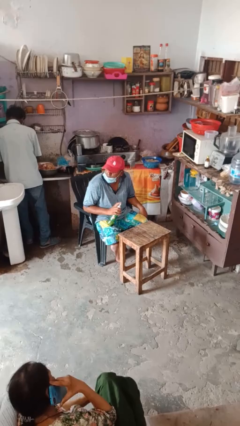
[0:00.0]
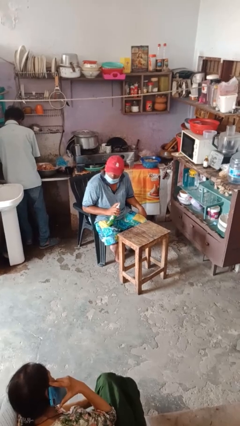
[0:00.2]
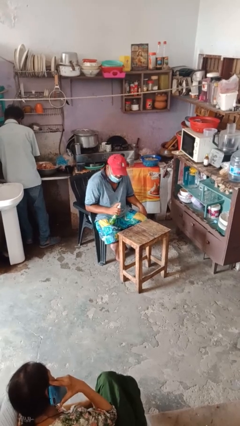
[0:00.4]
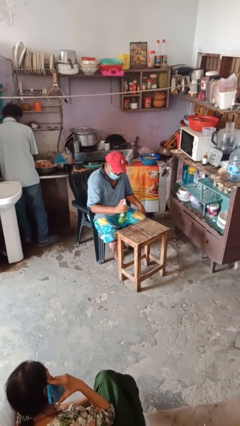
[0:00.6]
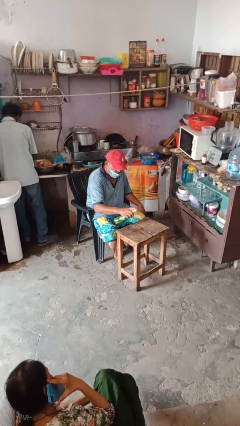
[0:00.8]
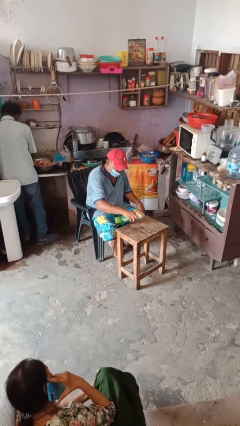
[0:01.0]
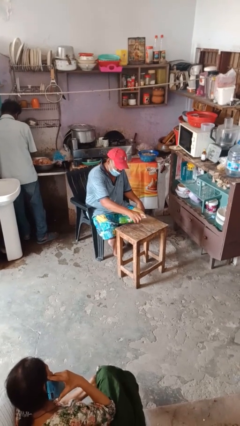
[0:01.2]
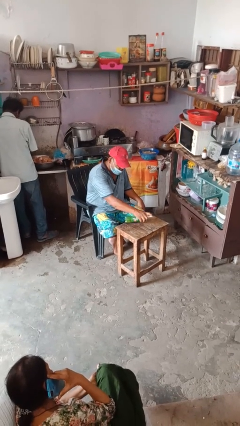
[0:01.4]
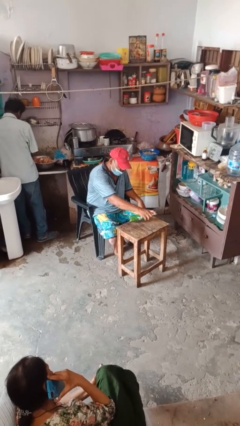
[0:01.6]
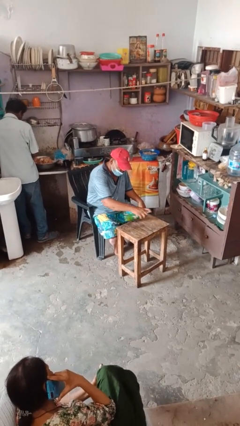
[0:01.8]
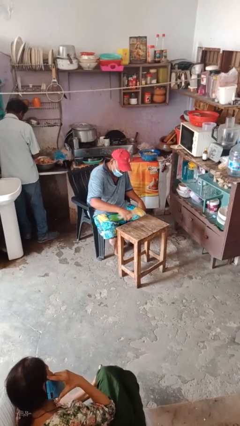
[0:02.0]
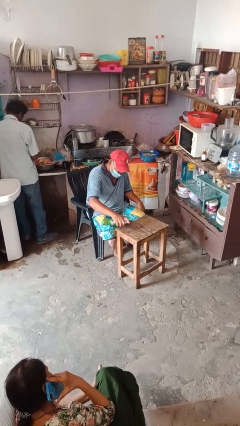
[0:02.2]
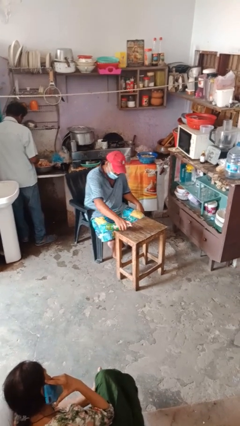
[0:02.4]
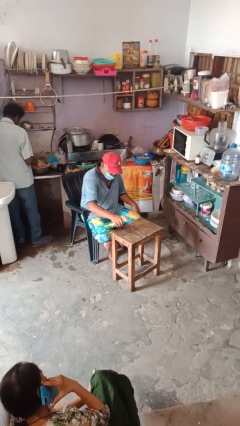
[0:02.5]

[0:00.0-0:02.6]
person sprays from bottle

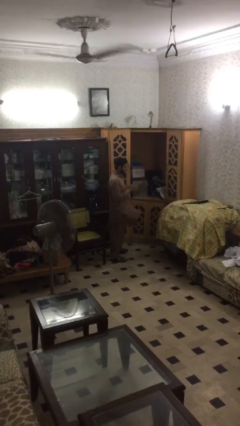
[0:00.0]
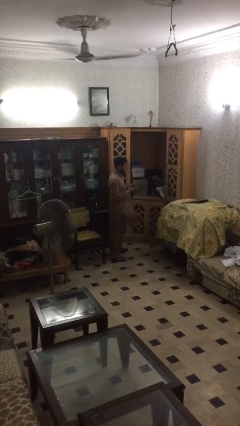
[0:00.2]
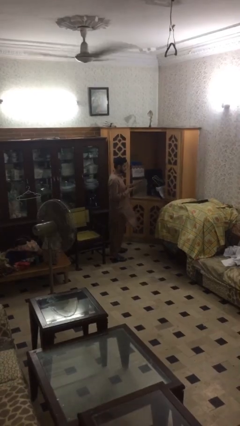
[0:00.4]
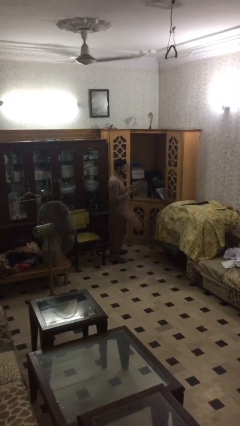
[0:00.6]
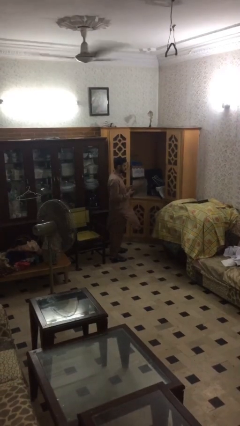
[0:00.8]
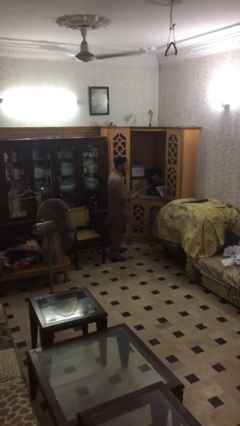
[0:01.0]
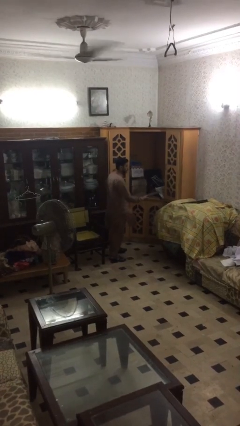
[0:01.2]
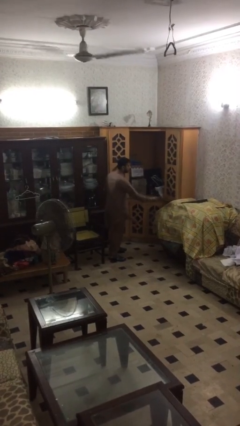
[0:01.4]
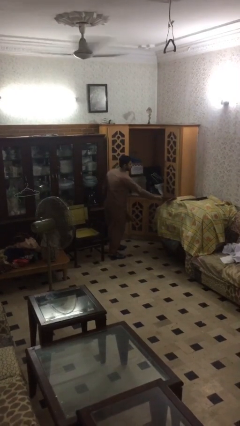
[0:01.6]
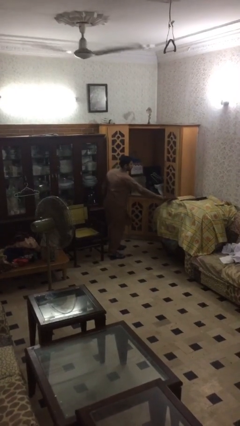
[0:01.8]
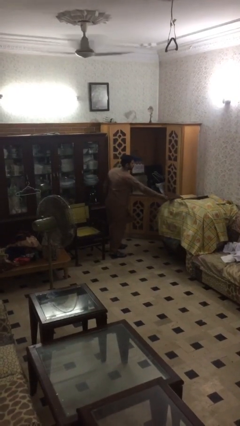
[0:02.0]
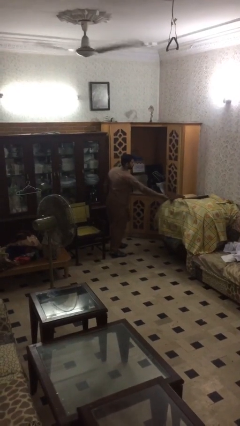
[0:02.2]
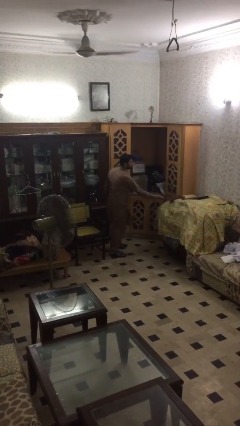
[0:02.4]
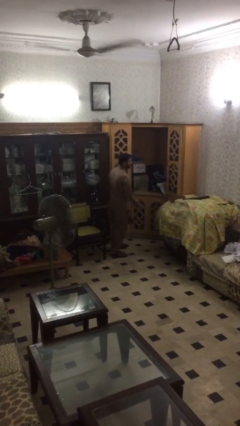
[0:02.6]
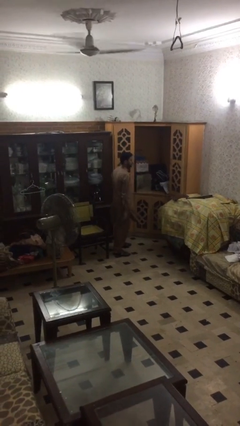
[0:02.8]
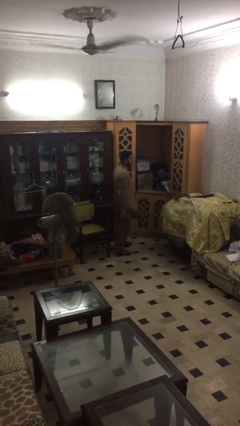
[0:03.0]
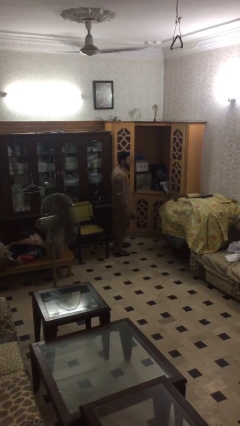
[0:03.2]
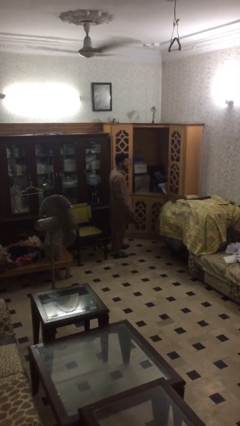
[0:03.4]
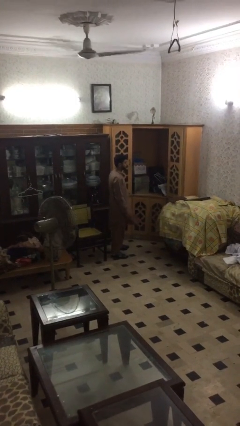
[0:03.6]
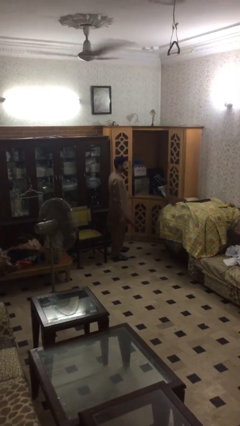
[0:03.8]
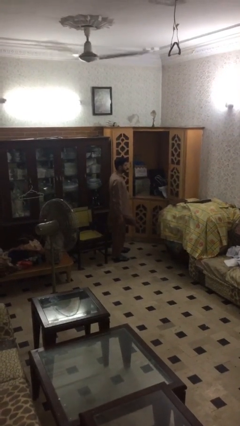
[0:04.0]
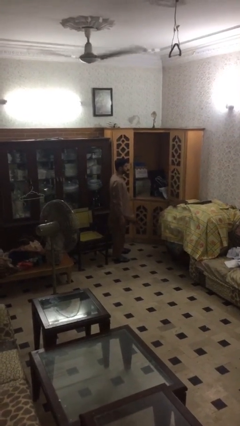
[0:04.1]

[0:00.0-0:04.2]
person puts down object on table

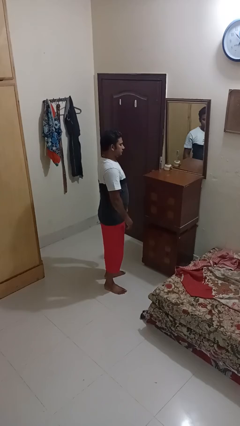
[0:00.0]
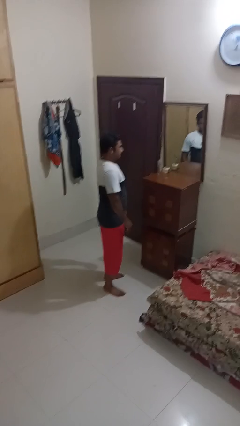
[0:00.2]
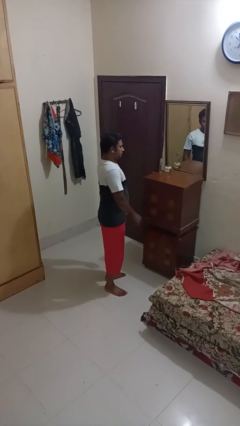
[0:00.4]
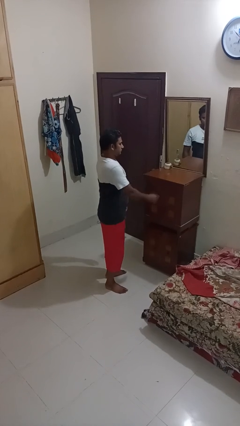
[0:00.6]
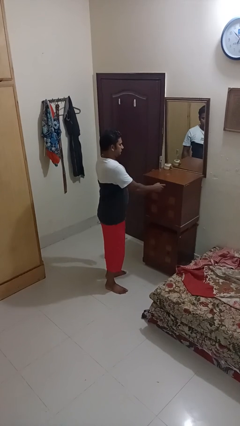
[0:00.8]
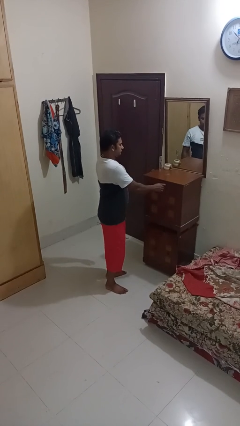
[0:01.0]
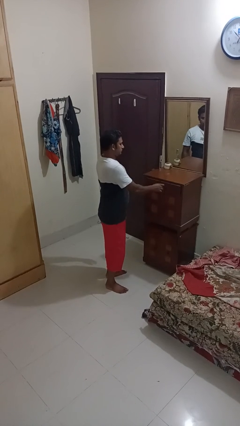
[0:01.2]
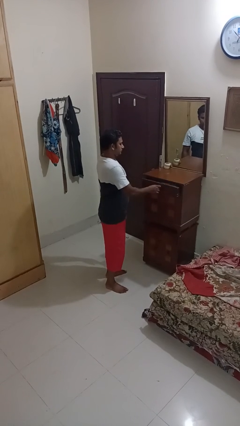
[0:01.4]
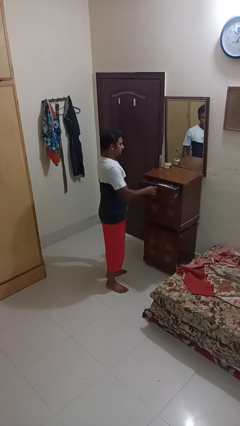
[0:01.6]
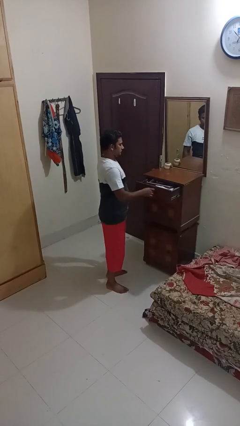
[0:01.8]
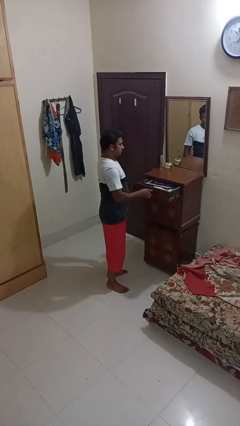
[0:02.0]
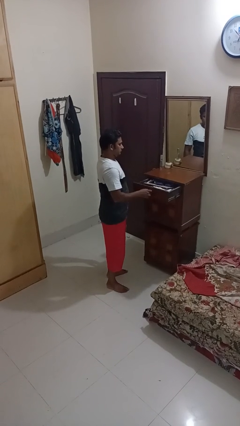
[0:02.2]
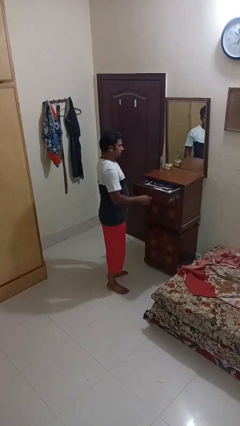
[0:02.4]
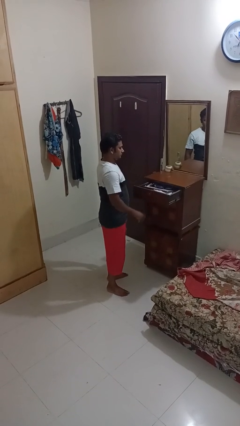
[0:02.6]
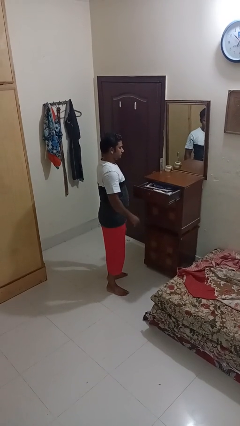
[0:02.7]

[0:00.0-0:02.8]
person opens dresser drawer

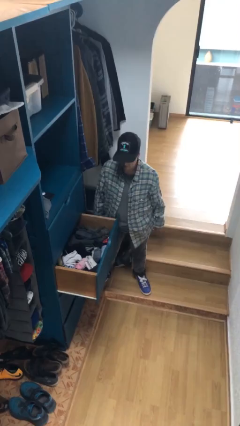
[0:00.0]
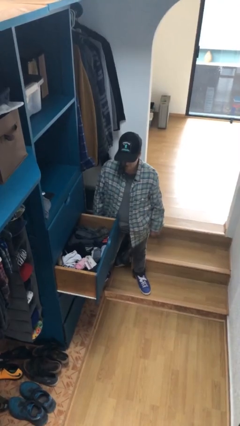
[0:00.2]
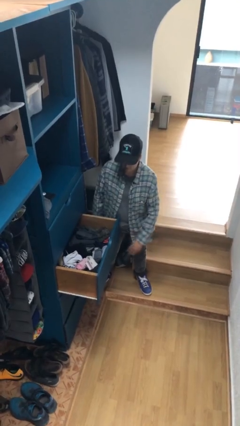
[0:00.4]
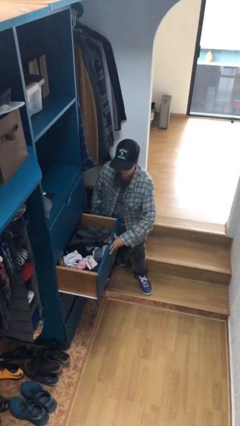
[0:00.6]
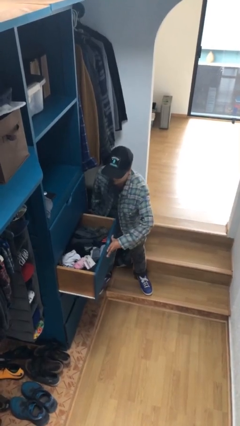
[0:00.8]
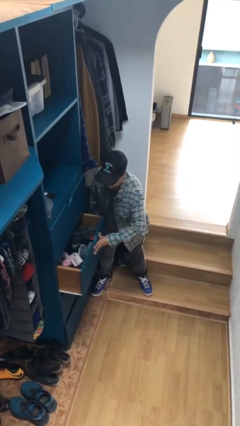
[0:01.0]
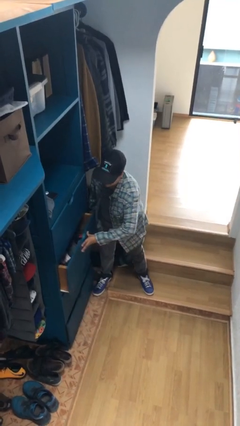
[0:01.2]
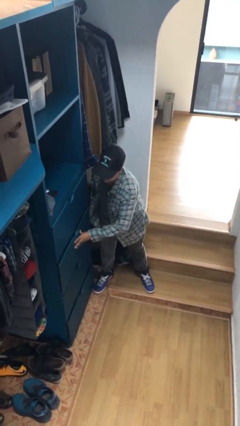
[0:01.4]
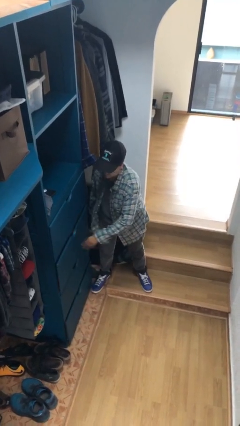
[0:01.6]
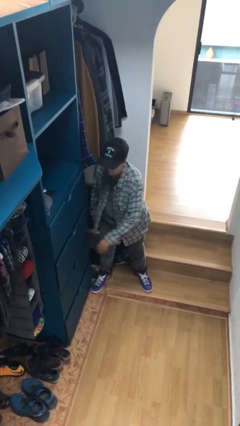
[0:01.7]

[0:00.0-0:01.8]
person closes dresser drawer

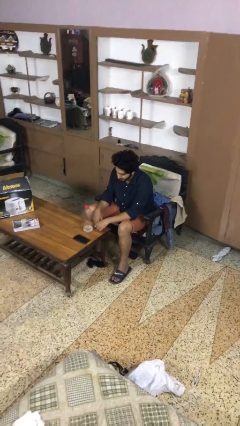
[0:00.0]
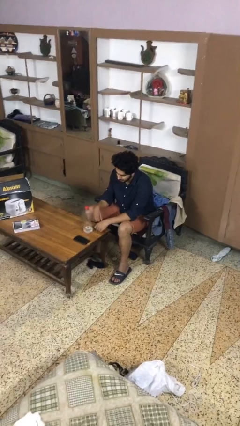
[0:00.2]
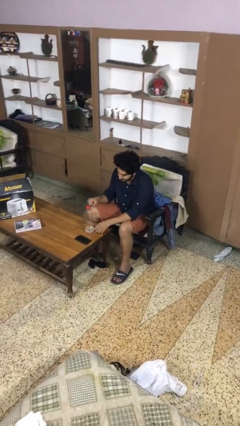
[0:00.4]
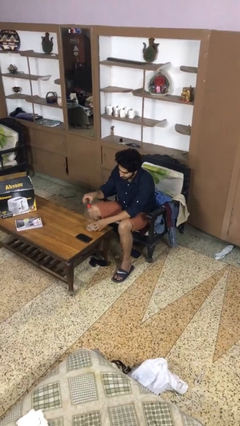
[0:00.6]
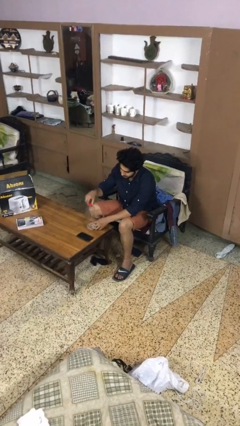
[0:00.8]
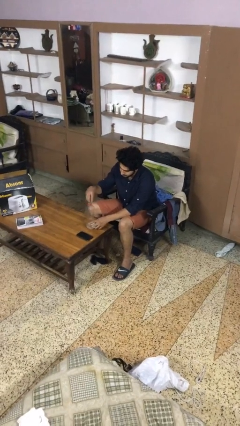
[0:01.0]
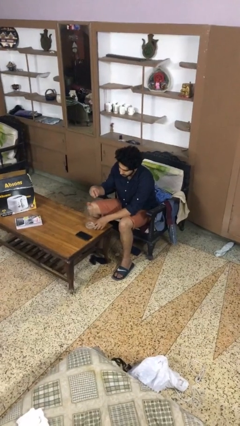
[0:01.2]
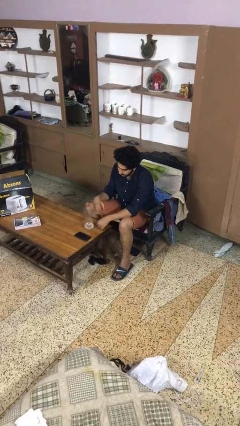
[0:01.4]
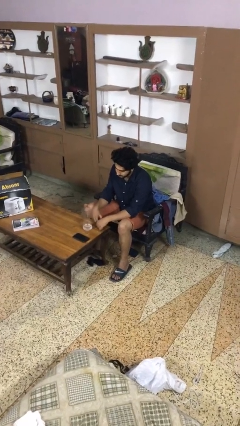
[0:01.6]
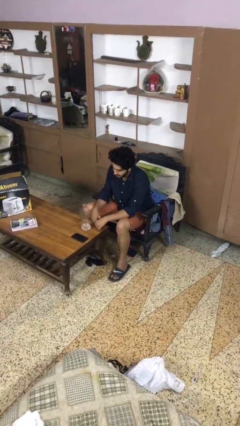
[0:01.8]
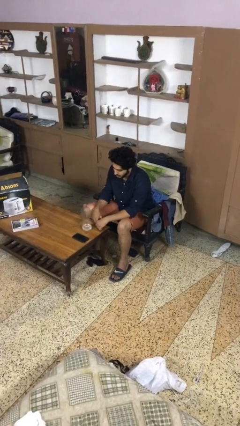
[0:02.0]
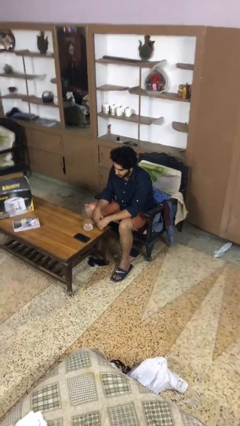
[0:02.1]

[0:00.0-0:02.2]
person unscrews lid from bottle

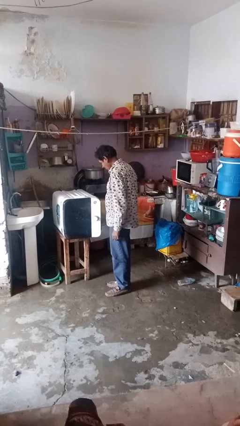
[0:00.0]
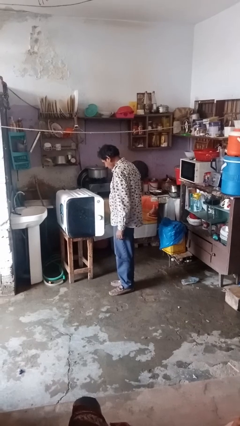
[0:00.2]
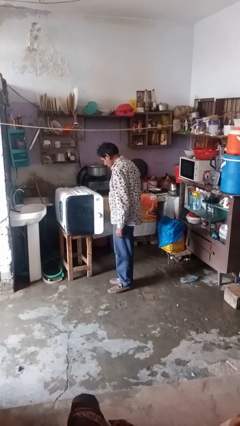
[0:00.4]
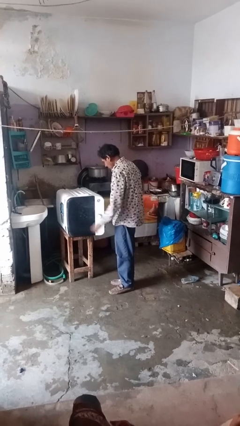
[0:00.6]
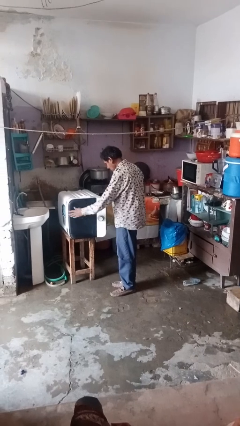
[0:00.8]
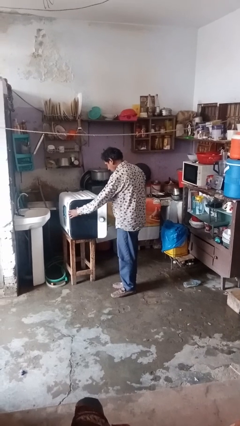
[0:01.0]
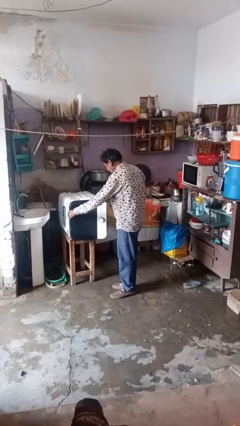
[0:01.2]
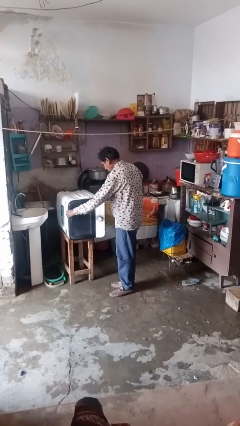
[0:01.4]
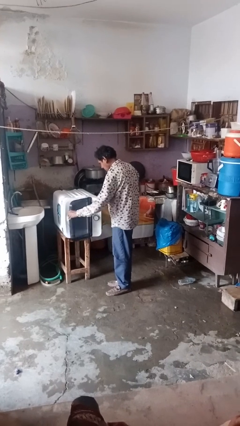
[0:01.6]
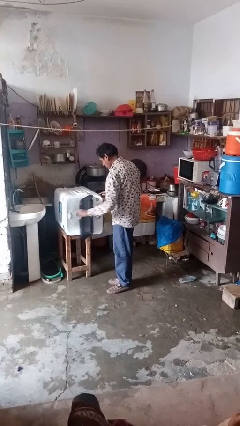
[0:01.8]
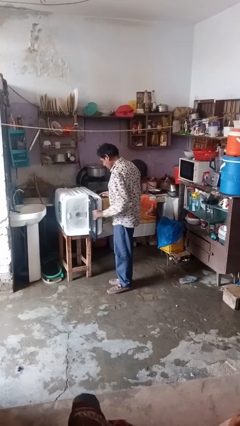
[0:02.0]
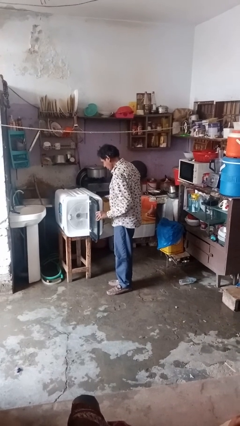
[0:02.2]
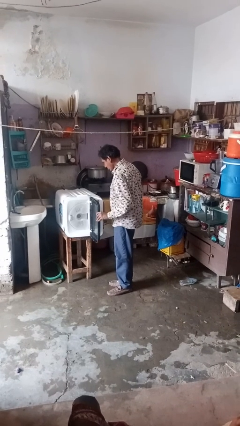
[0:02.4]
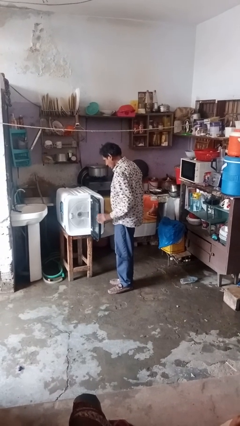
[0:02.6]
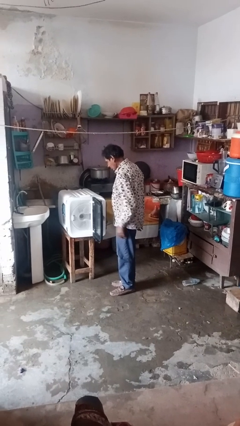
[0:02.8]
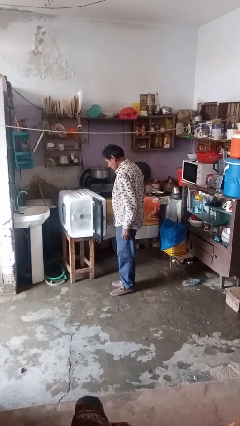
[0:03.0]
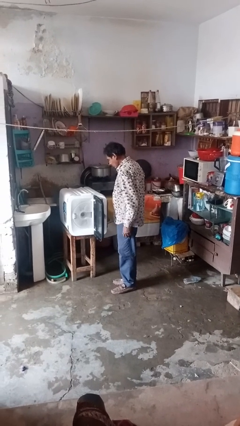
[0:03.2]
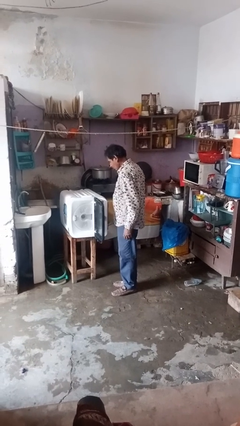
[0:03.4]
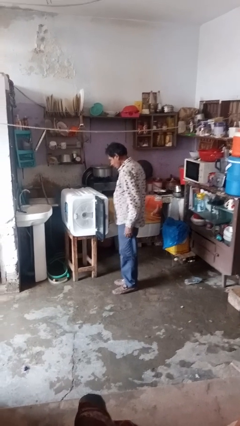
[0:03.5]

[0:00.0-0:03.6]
person opens dishwasher

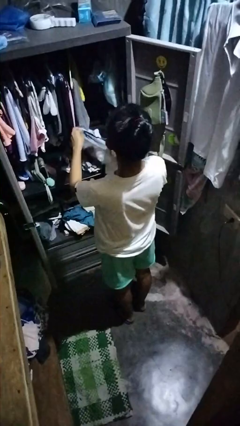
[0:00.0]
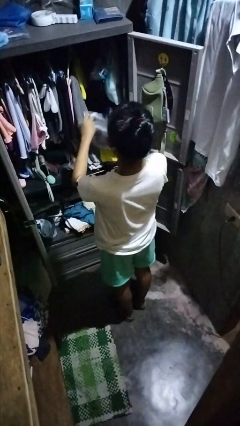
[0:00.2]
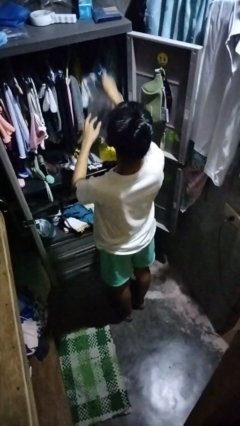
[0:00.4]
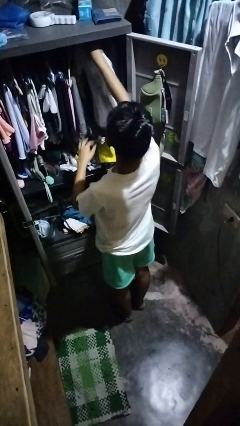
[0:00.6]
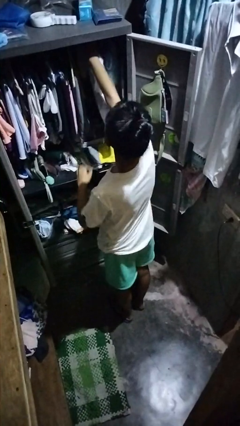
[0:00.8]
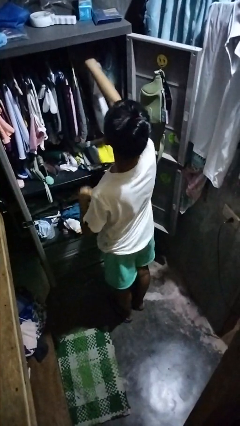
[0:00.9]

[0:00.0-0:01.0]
person puts clothes into closet
